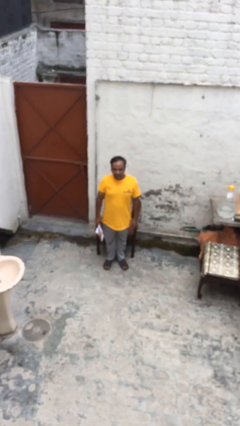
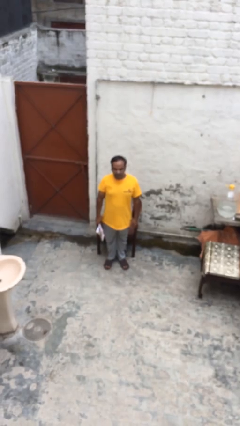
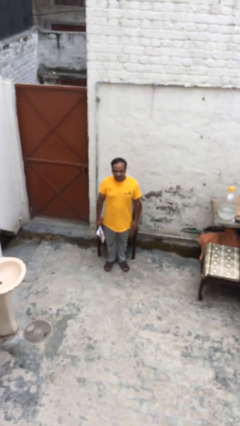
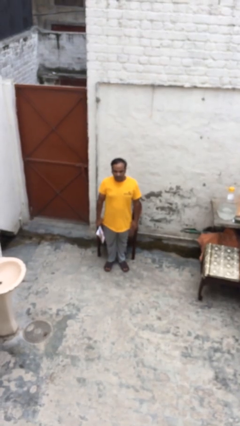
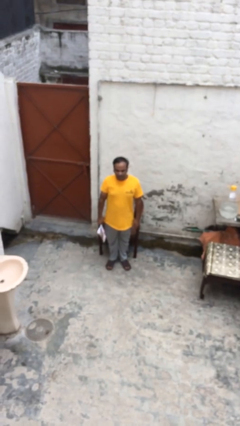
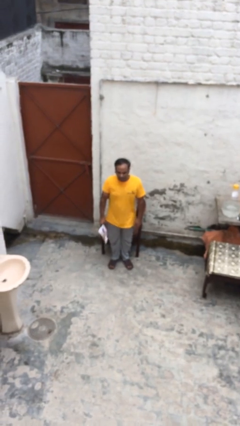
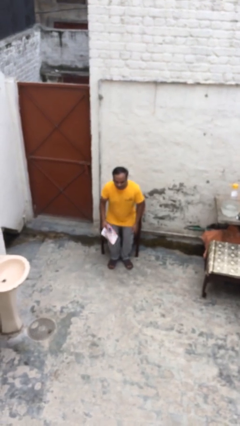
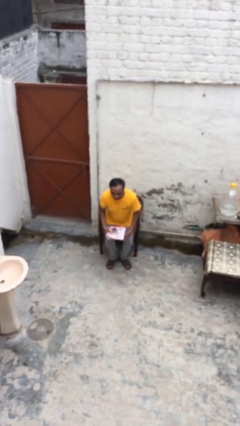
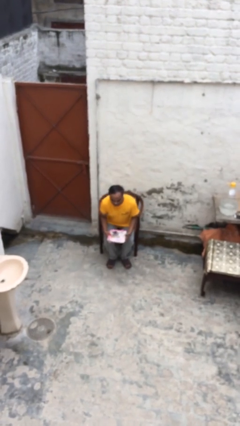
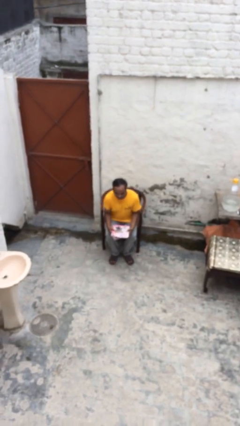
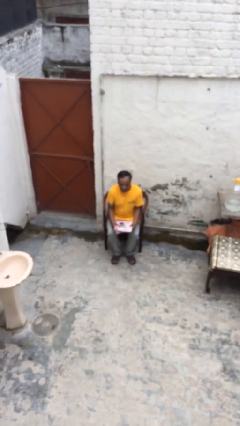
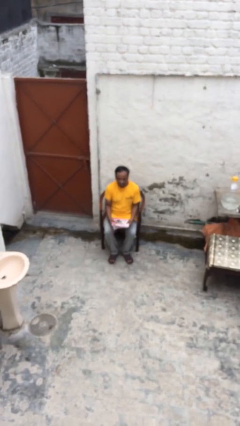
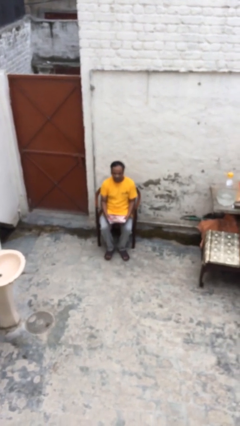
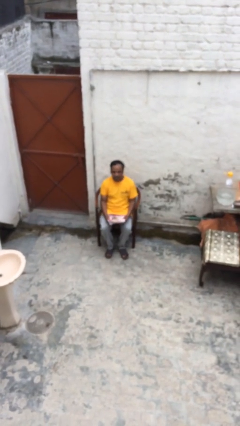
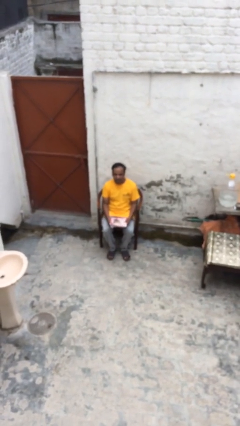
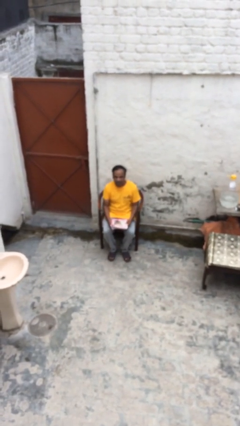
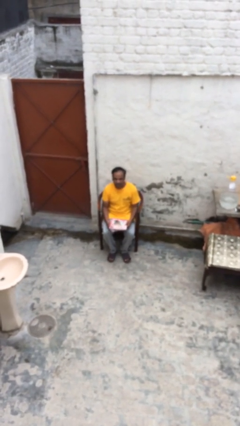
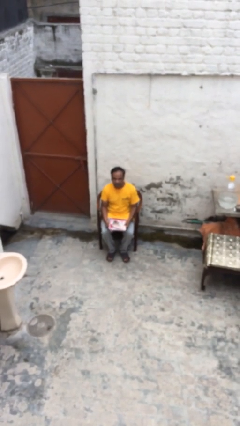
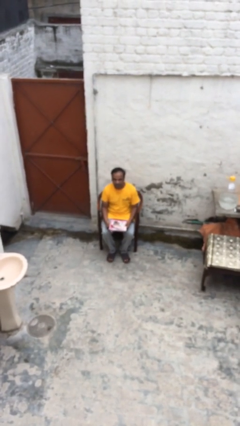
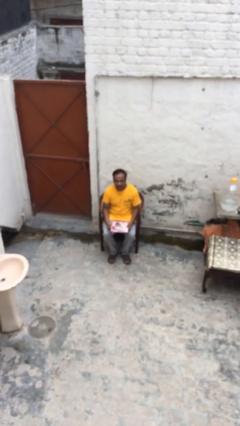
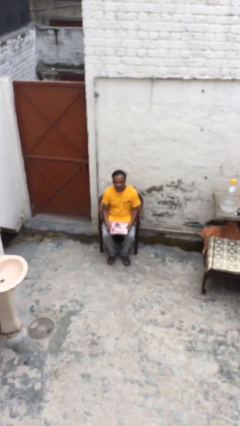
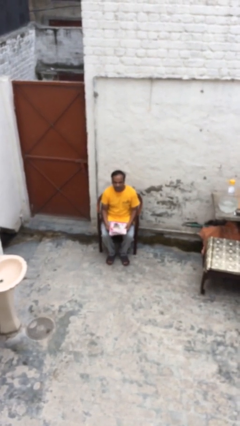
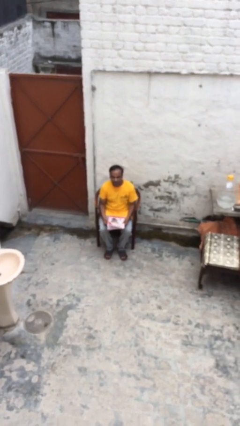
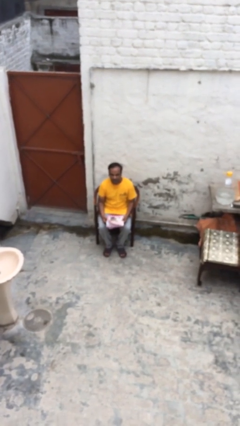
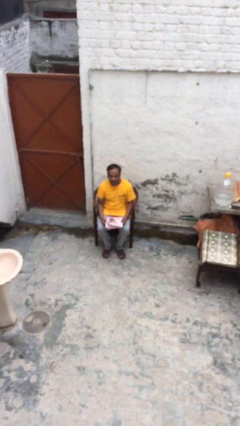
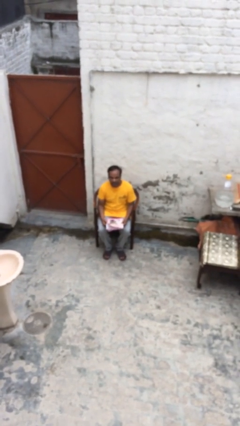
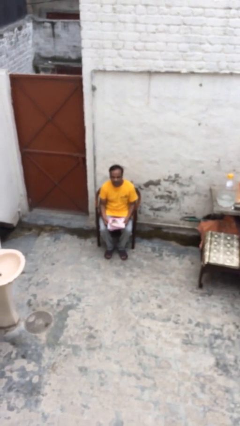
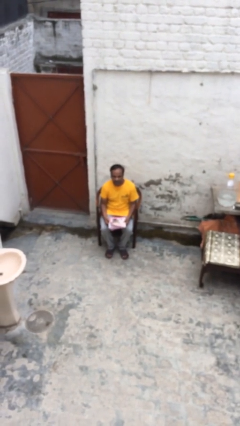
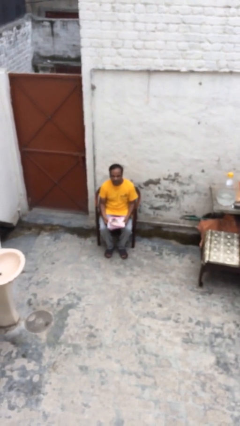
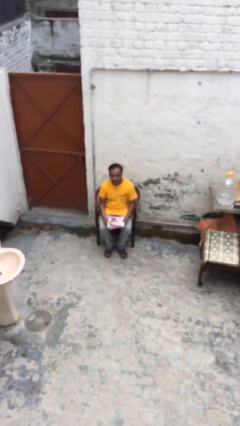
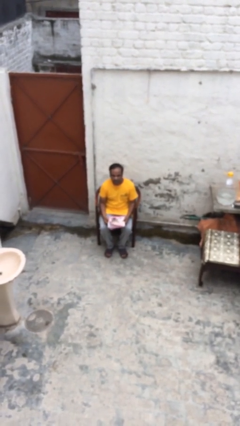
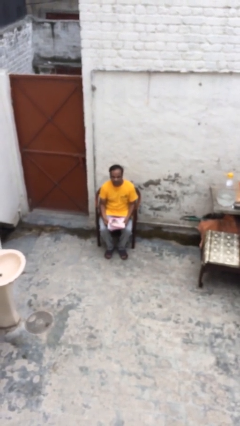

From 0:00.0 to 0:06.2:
person sits down

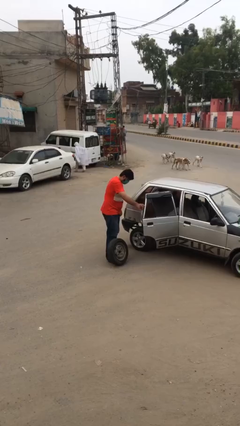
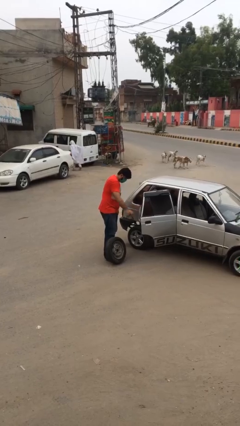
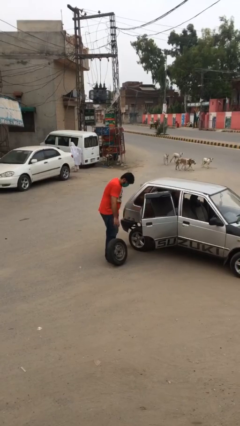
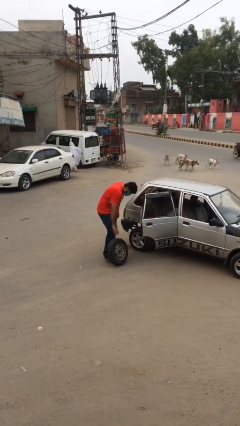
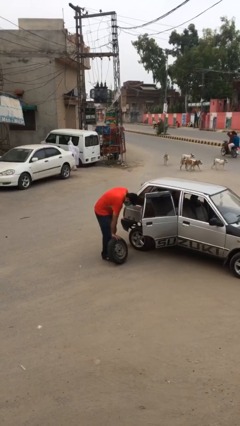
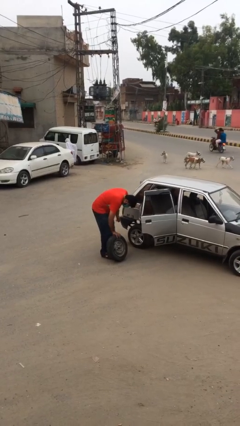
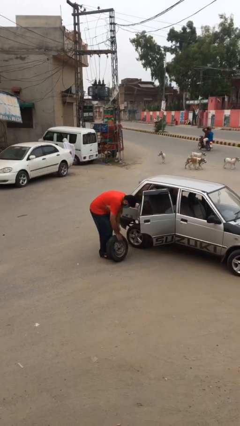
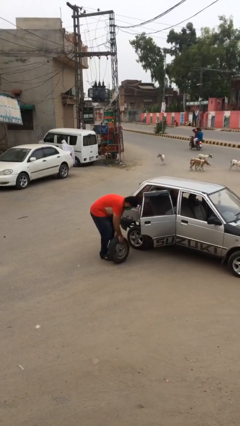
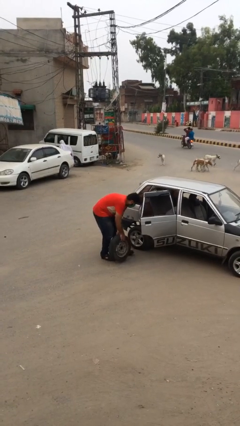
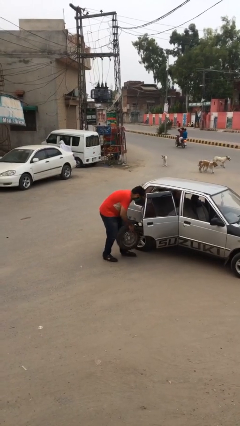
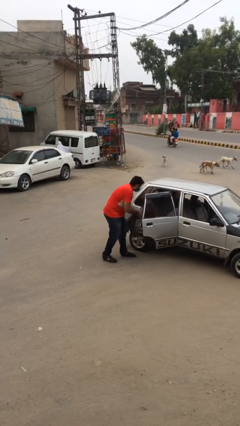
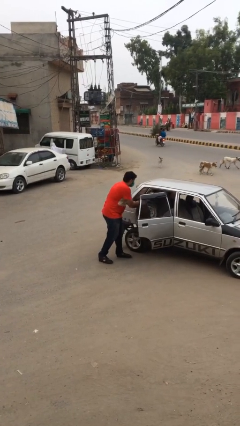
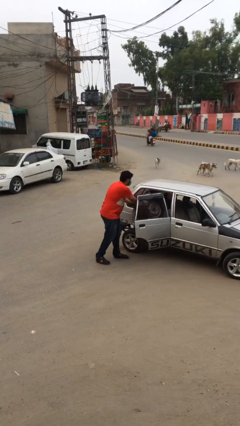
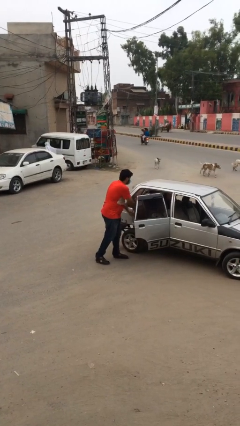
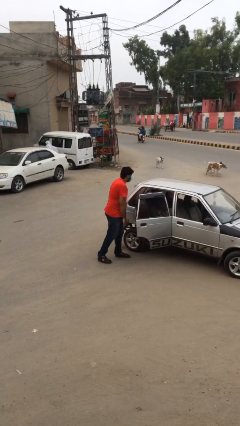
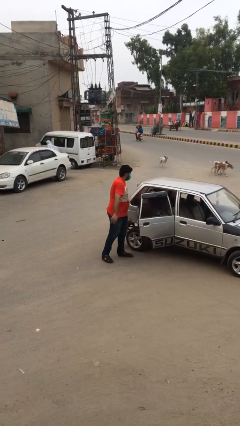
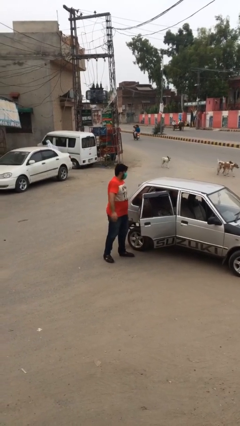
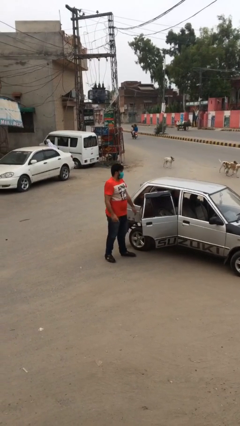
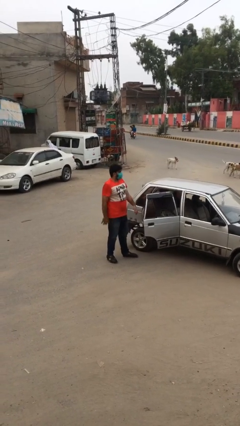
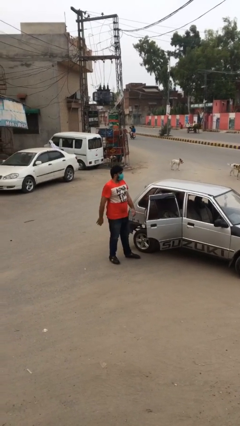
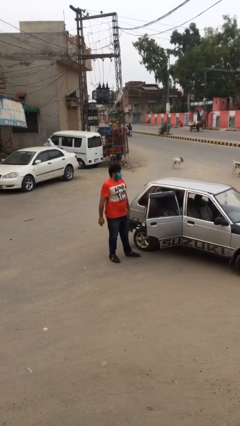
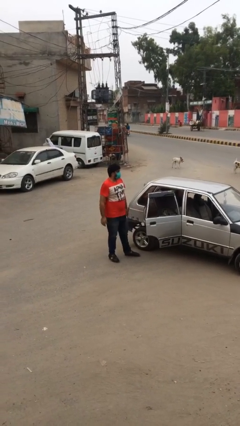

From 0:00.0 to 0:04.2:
person loads car

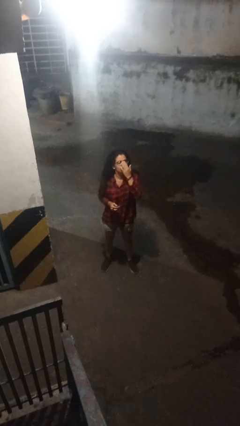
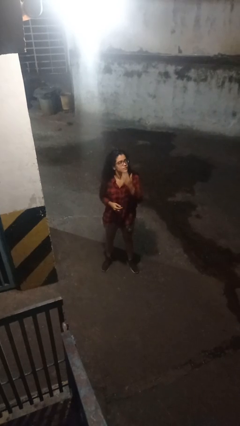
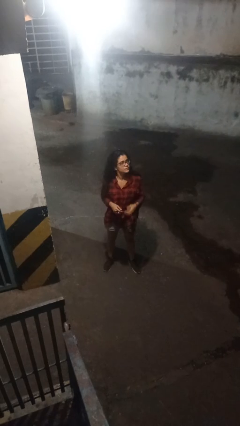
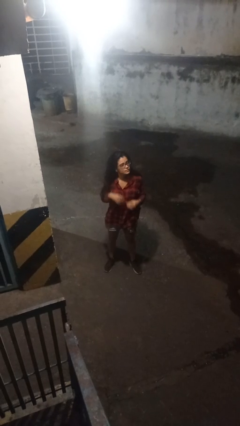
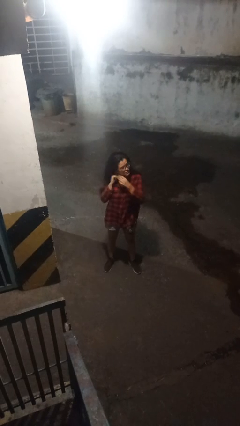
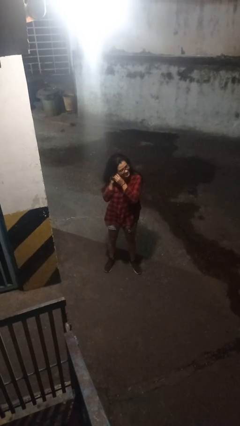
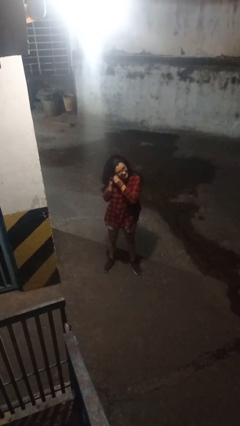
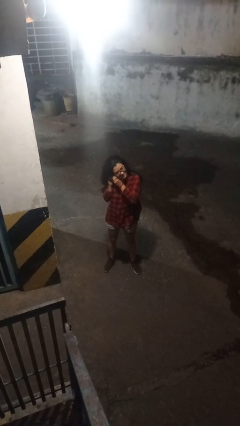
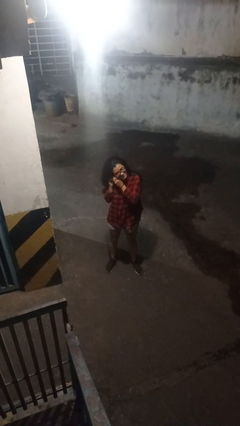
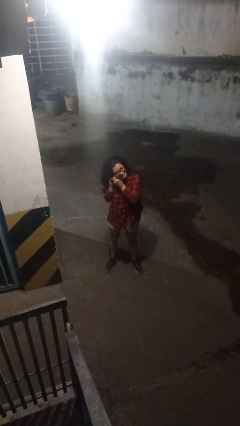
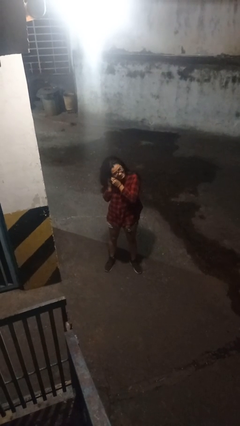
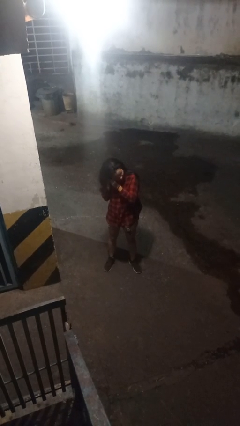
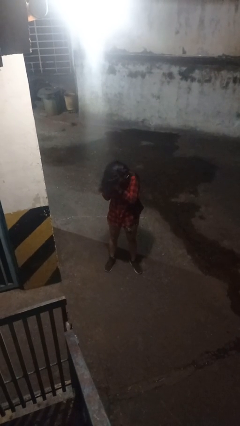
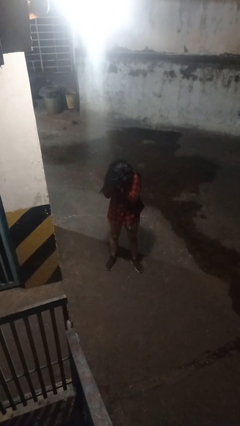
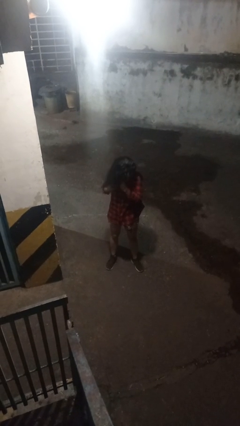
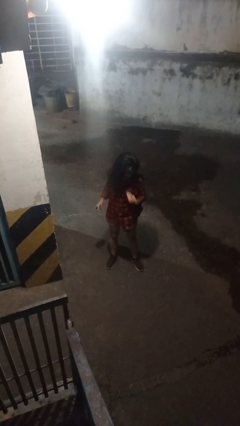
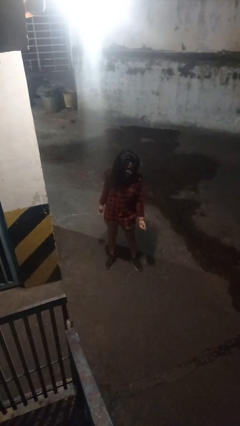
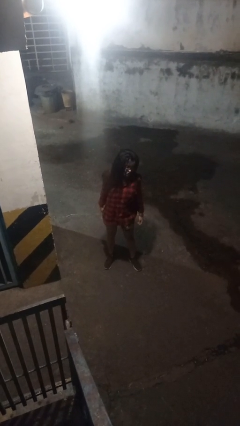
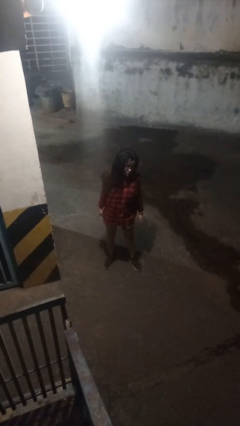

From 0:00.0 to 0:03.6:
person takes off earrings

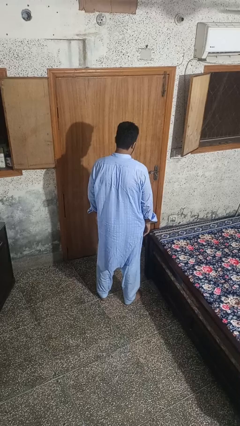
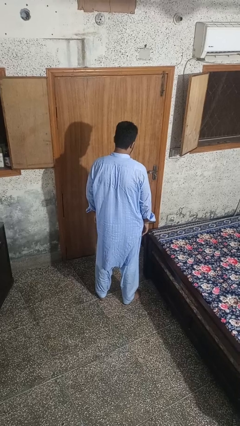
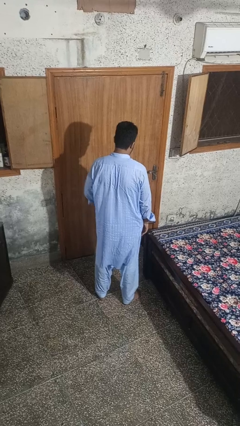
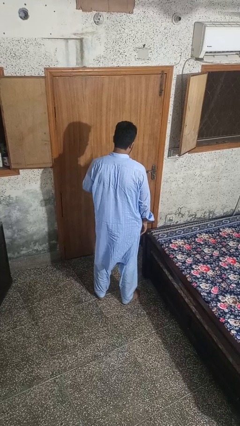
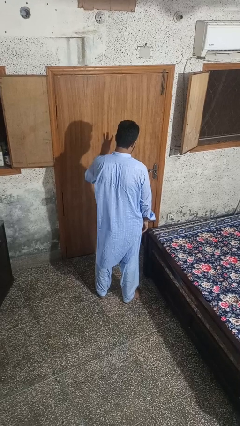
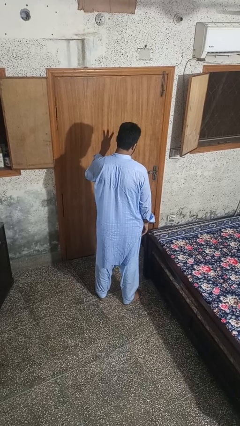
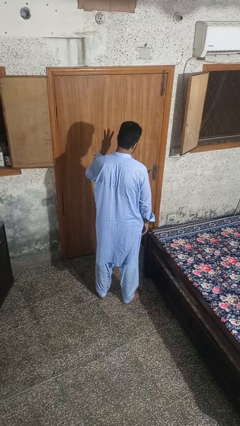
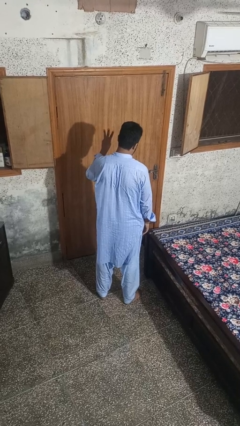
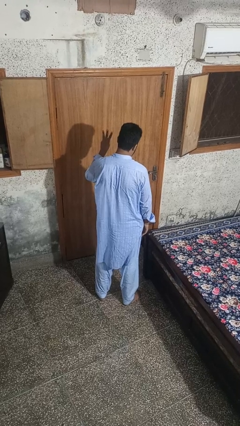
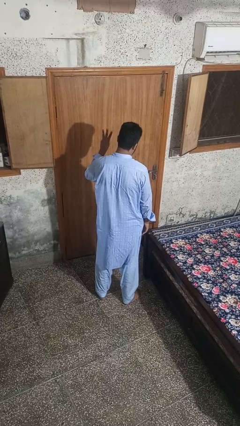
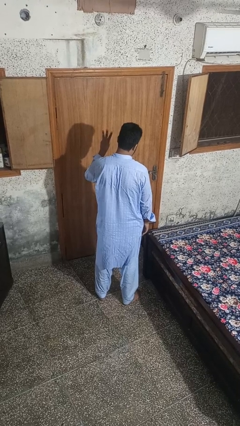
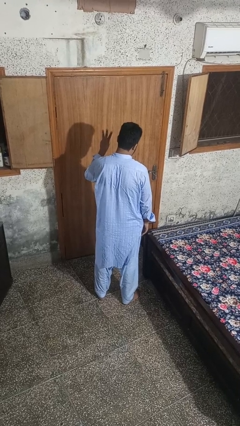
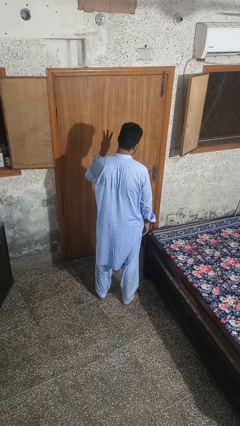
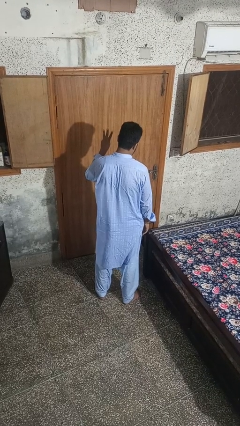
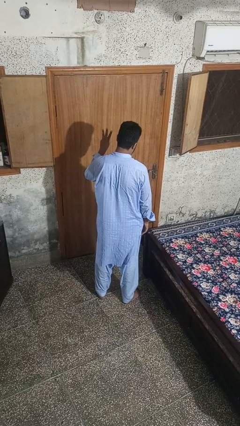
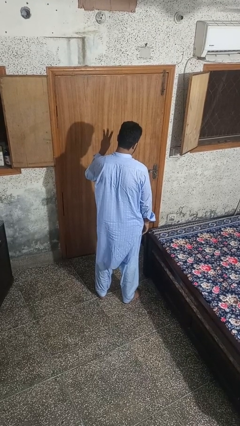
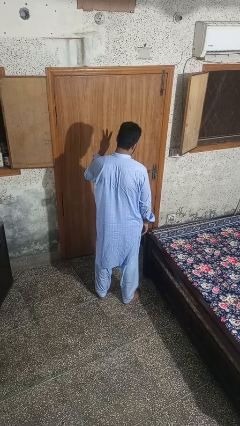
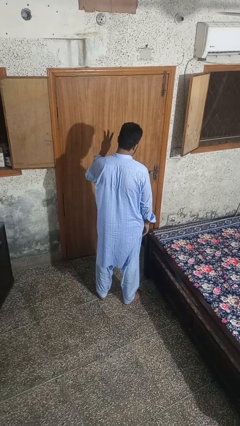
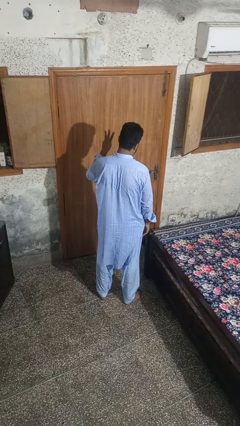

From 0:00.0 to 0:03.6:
person gestures number three
